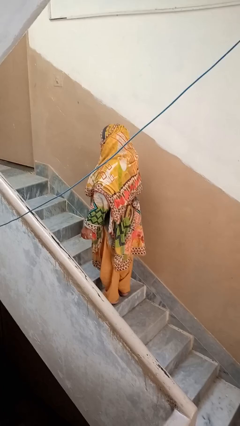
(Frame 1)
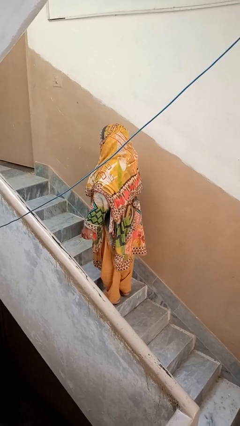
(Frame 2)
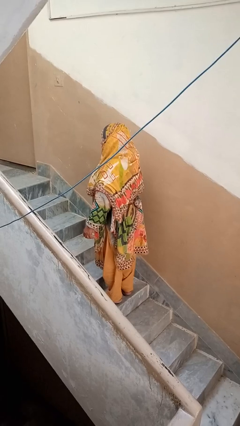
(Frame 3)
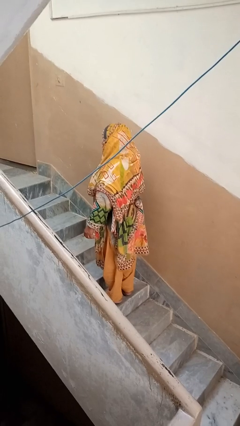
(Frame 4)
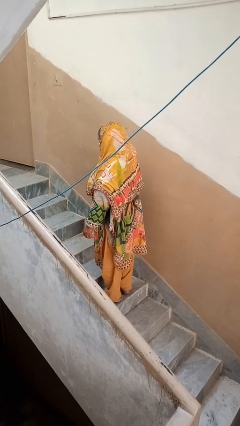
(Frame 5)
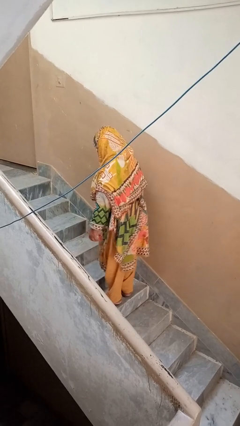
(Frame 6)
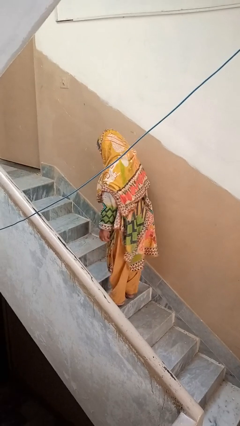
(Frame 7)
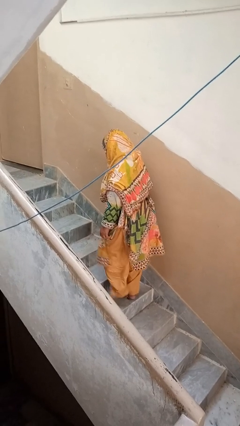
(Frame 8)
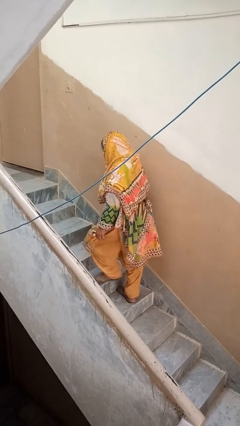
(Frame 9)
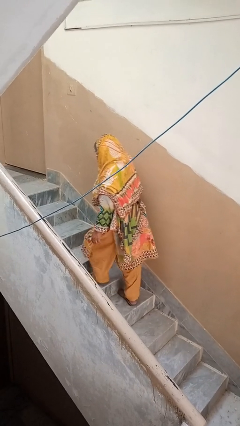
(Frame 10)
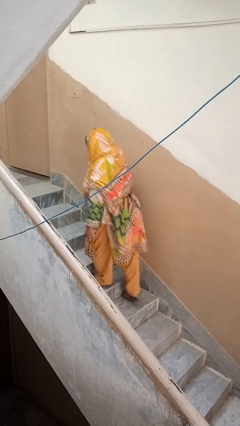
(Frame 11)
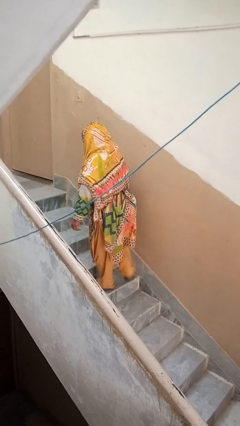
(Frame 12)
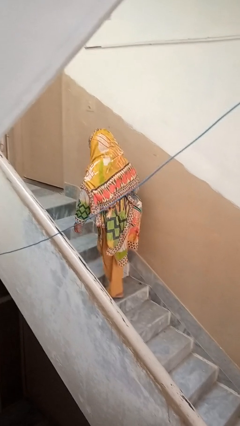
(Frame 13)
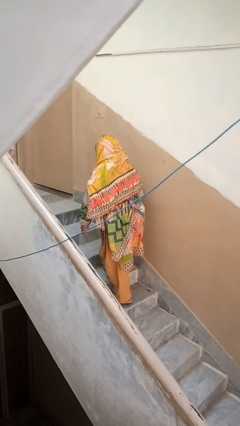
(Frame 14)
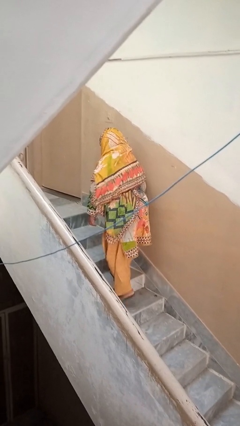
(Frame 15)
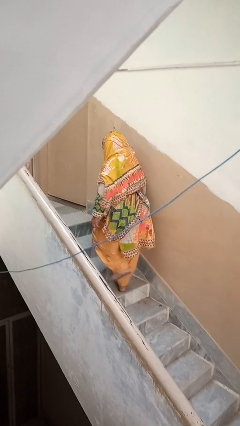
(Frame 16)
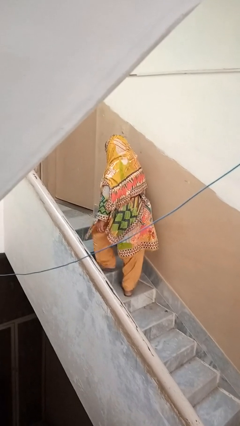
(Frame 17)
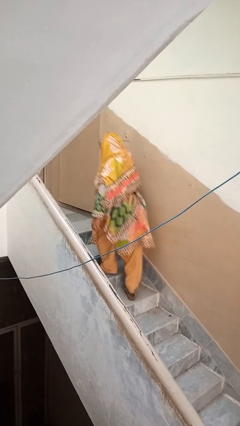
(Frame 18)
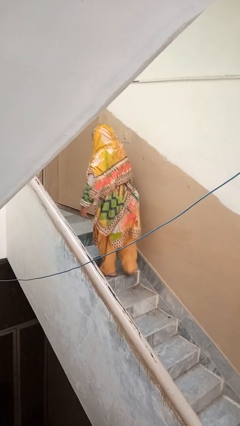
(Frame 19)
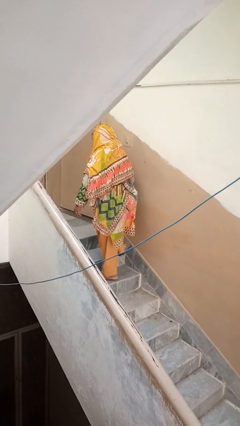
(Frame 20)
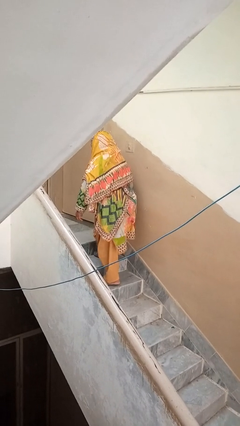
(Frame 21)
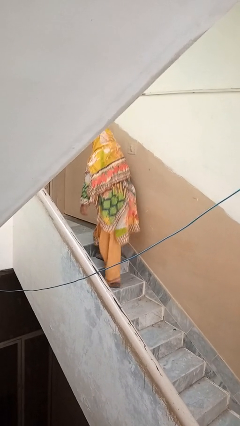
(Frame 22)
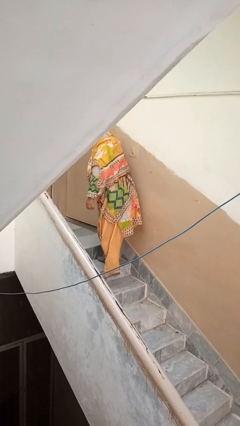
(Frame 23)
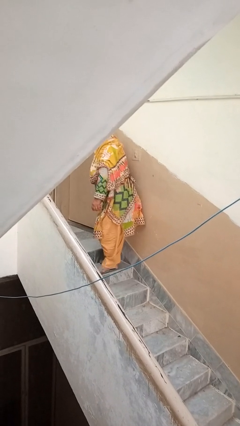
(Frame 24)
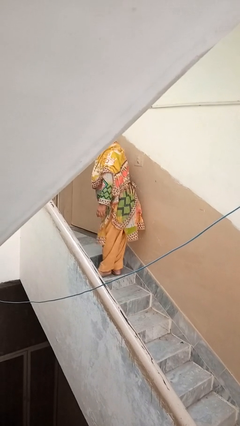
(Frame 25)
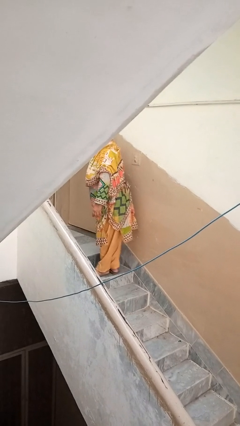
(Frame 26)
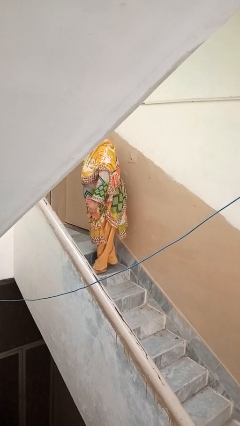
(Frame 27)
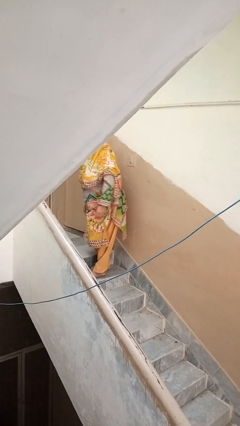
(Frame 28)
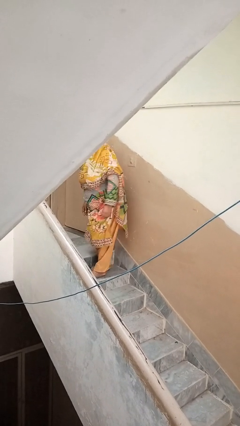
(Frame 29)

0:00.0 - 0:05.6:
person climbs up stairs

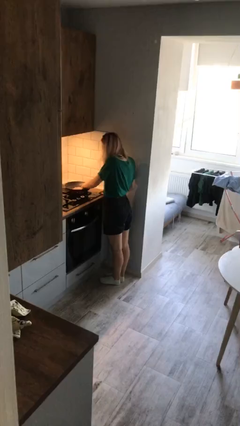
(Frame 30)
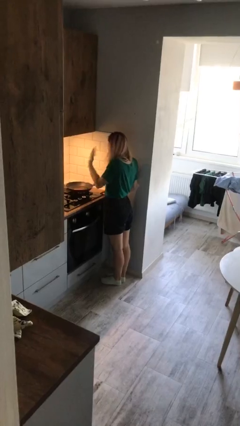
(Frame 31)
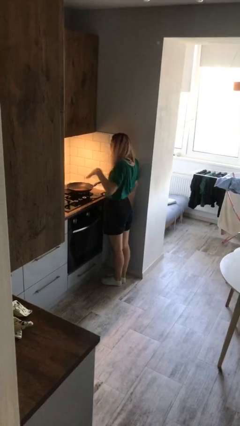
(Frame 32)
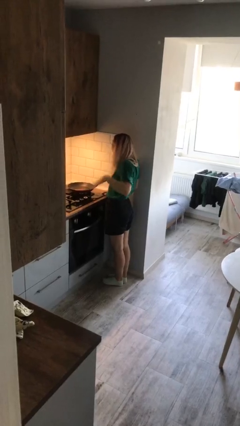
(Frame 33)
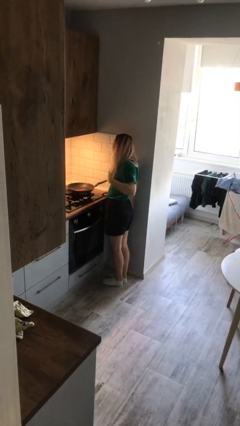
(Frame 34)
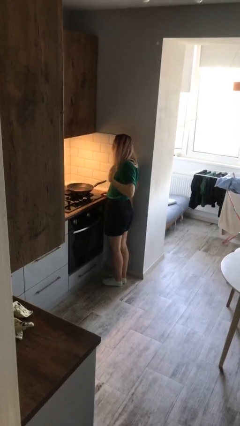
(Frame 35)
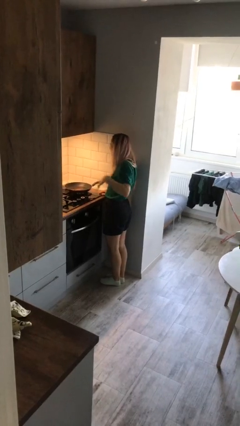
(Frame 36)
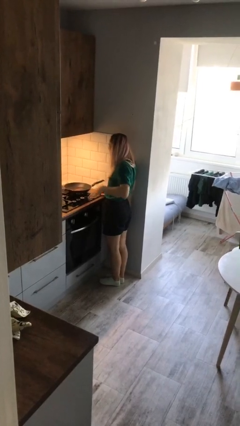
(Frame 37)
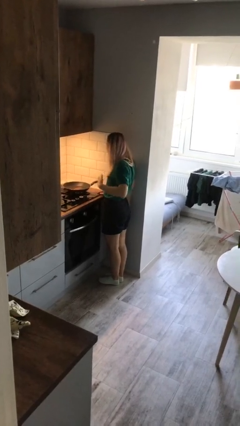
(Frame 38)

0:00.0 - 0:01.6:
person burns hand

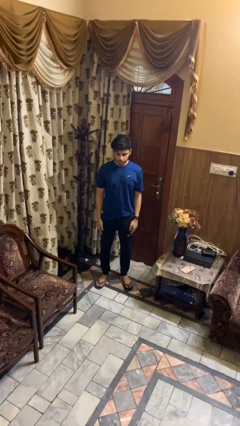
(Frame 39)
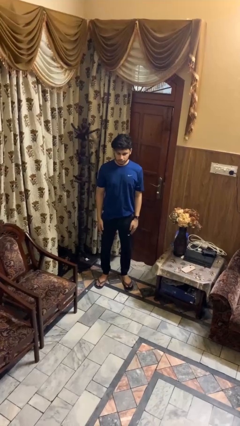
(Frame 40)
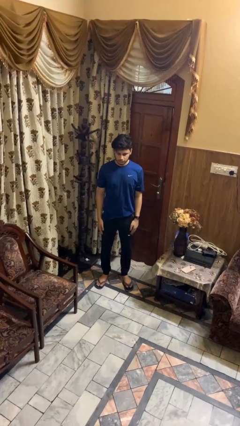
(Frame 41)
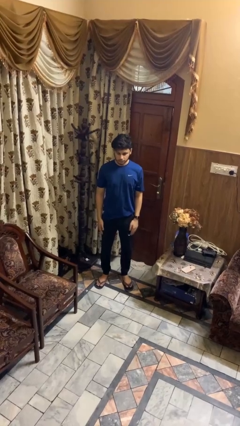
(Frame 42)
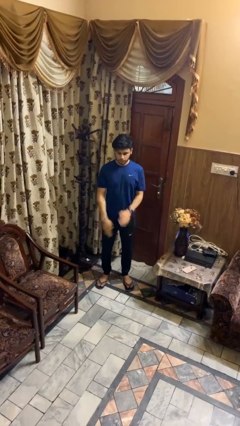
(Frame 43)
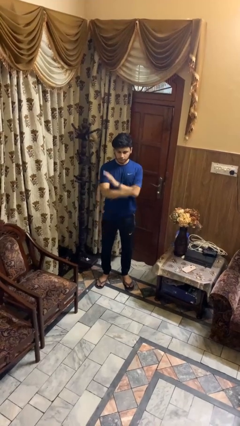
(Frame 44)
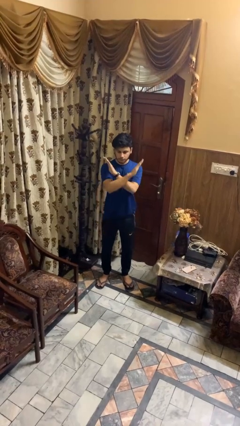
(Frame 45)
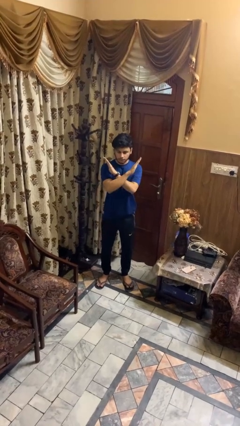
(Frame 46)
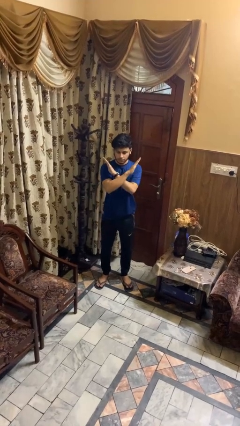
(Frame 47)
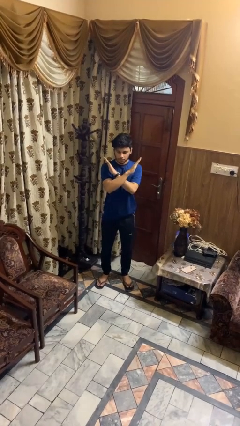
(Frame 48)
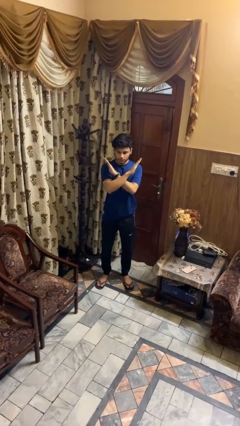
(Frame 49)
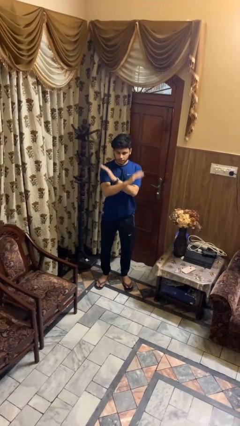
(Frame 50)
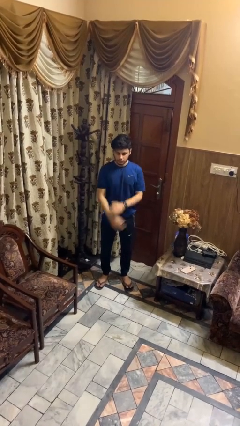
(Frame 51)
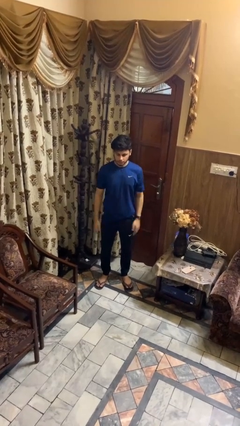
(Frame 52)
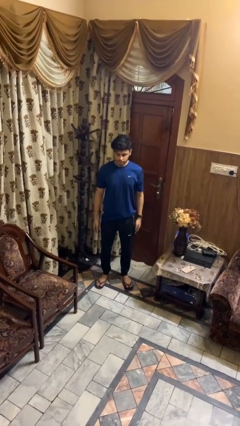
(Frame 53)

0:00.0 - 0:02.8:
person gestures arms x

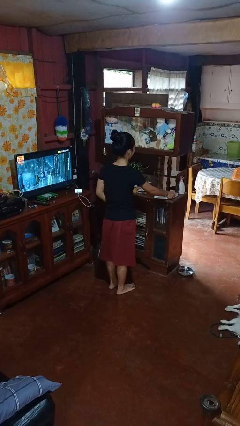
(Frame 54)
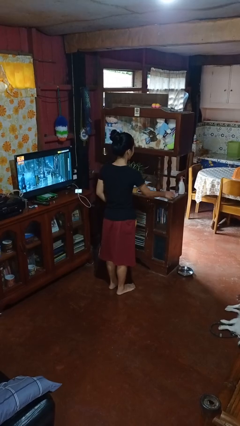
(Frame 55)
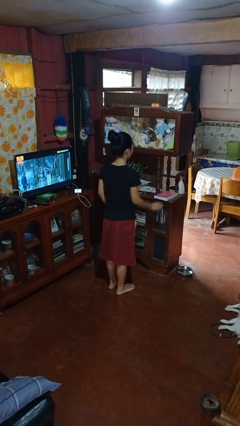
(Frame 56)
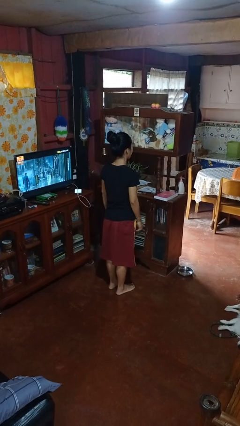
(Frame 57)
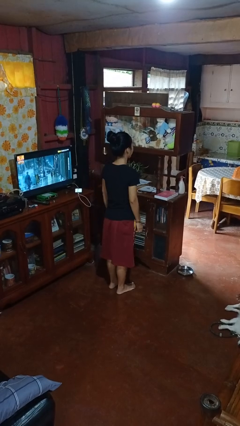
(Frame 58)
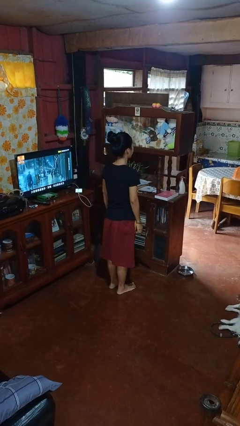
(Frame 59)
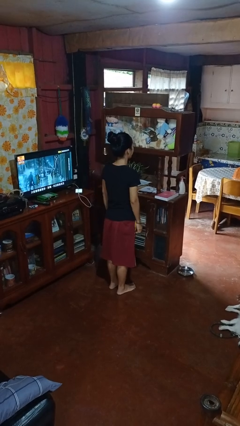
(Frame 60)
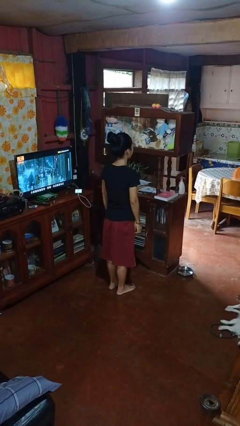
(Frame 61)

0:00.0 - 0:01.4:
person puts down object on shelf

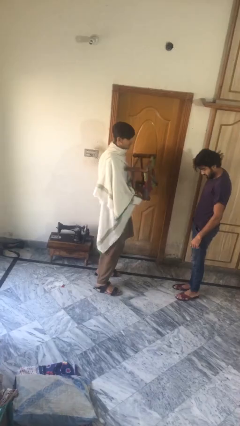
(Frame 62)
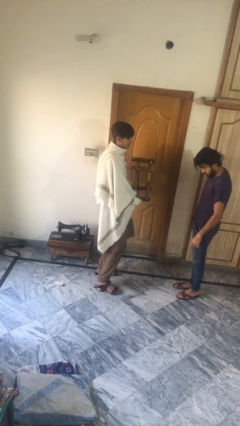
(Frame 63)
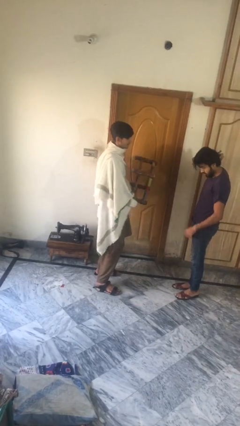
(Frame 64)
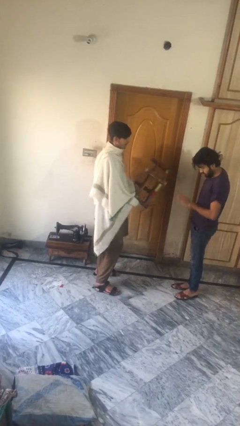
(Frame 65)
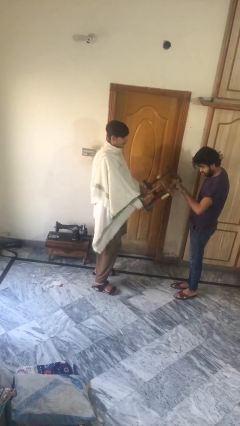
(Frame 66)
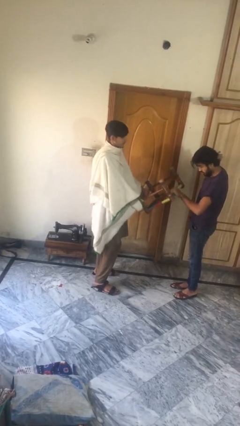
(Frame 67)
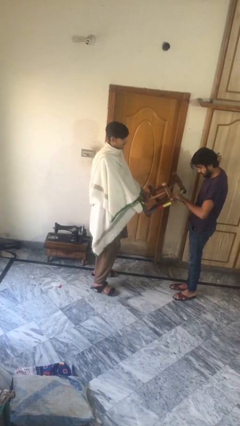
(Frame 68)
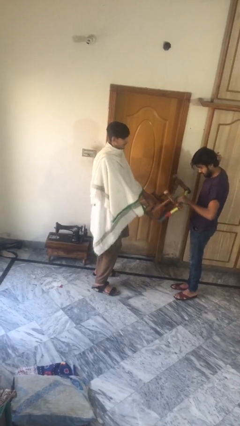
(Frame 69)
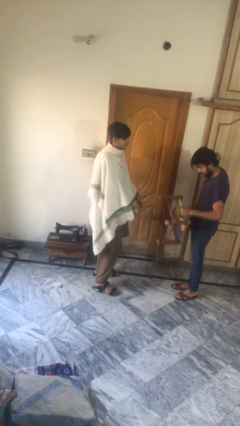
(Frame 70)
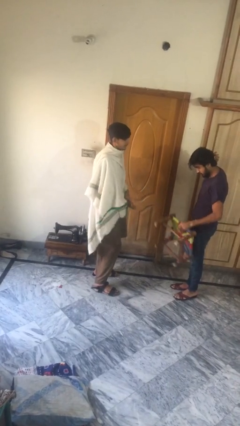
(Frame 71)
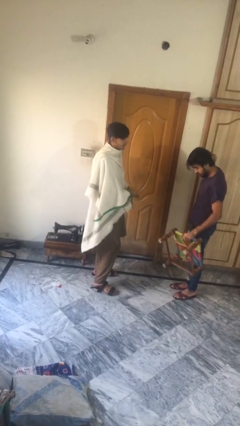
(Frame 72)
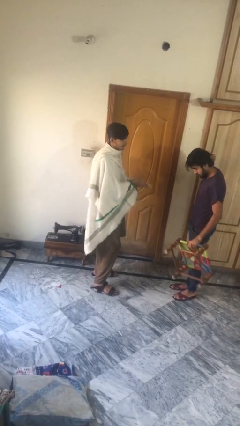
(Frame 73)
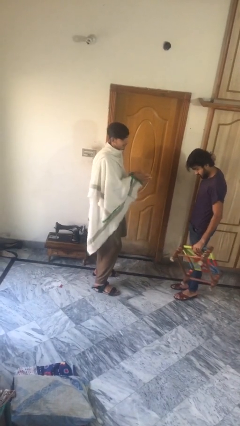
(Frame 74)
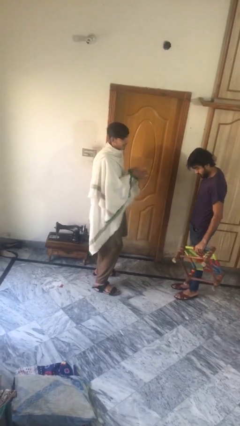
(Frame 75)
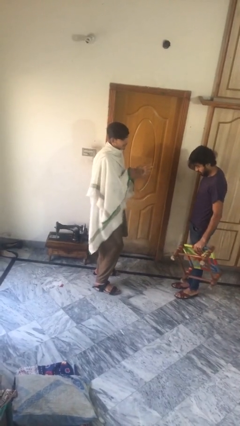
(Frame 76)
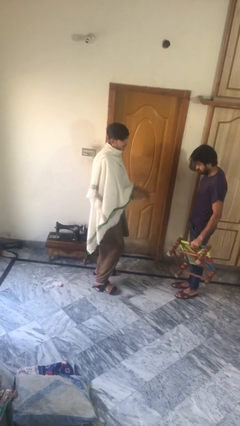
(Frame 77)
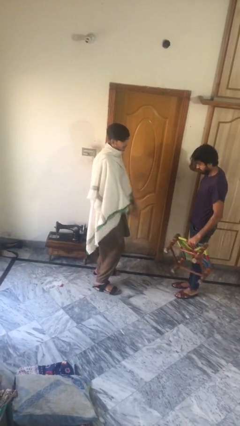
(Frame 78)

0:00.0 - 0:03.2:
person transfers object to person

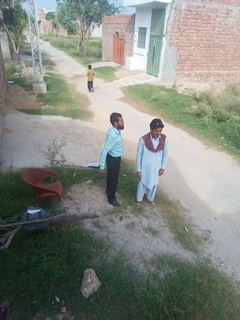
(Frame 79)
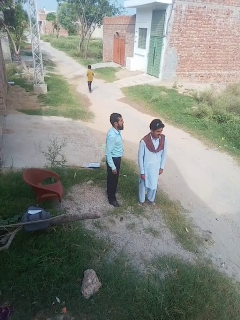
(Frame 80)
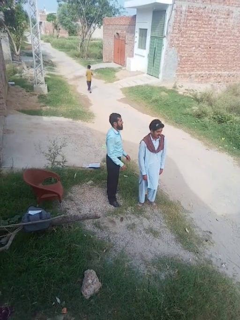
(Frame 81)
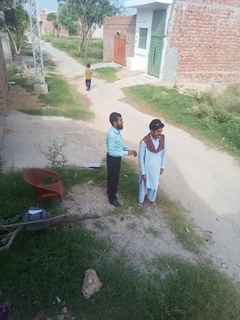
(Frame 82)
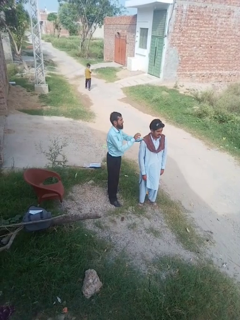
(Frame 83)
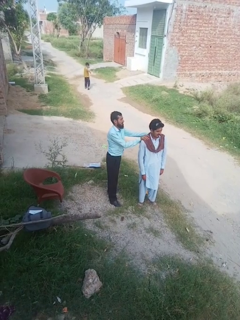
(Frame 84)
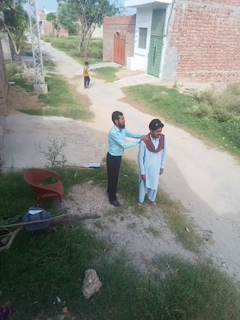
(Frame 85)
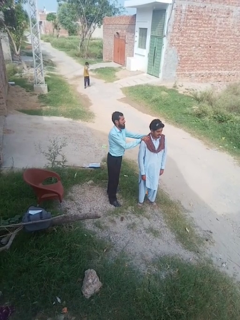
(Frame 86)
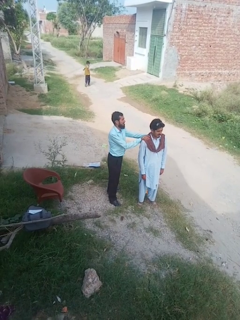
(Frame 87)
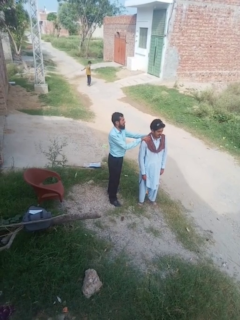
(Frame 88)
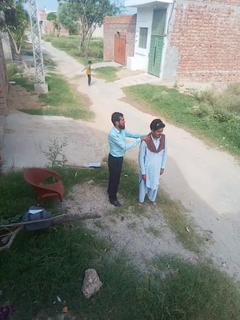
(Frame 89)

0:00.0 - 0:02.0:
person grabs person by shoulder

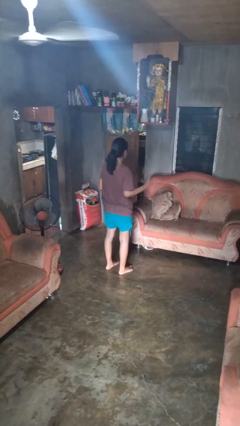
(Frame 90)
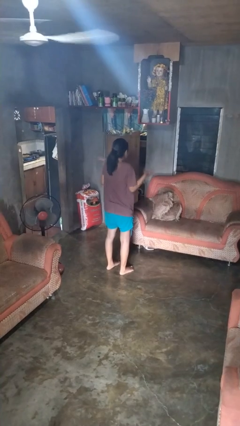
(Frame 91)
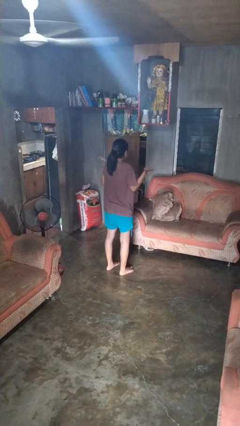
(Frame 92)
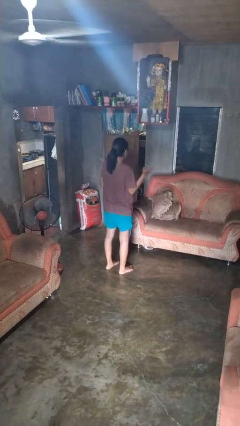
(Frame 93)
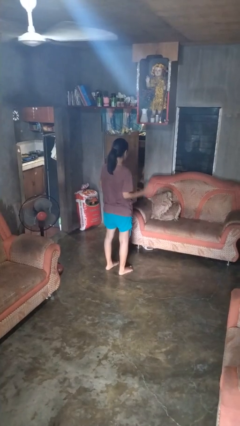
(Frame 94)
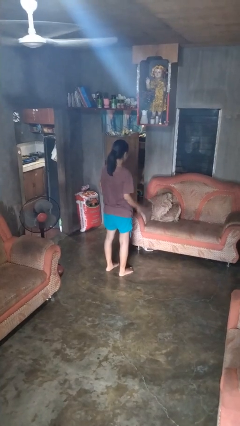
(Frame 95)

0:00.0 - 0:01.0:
person shrugs
